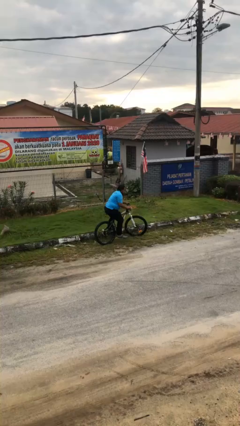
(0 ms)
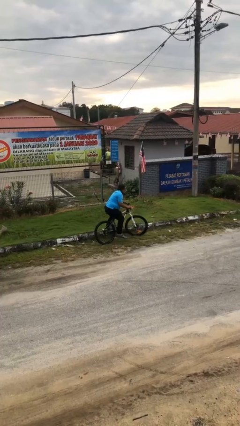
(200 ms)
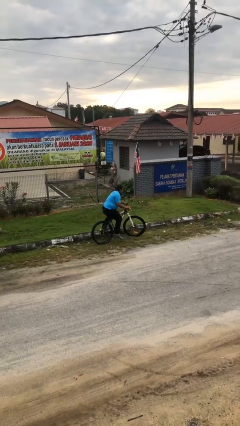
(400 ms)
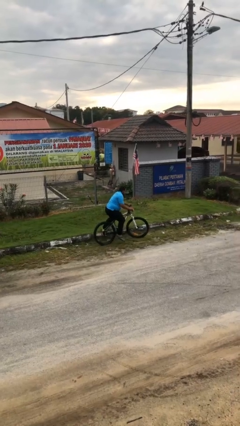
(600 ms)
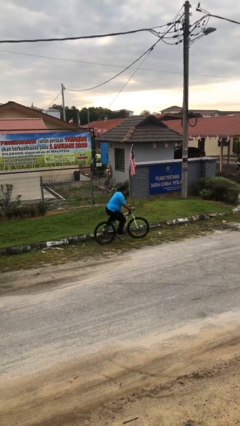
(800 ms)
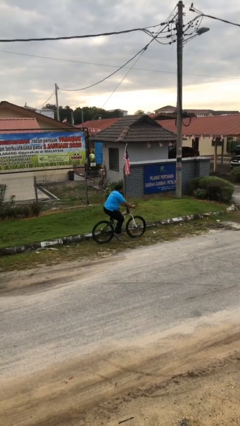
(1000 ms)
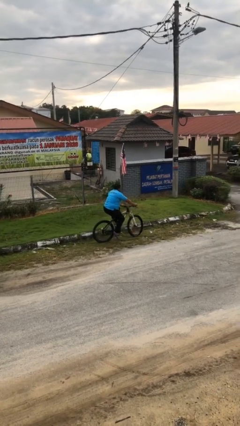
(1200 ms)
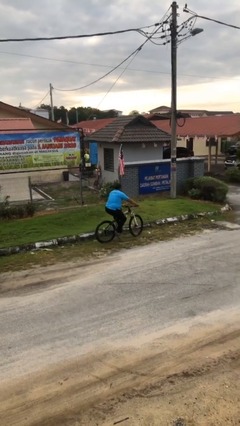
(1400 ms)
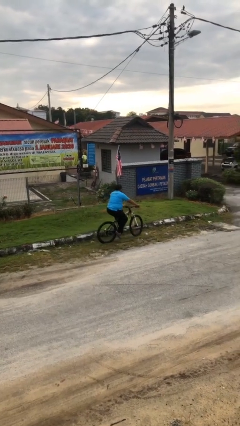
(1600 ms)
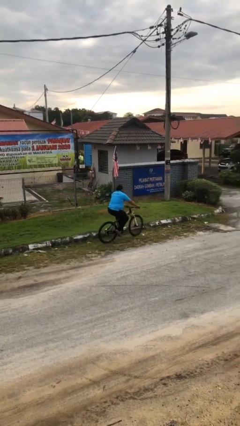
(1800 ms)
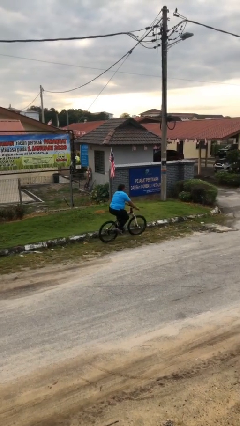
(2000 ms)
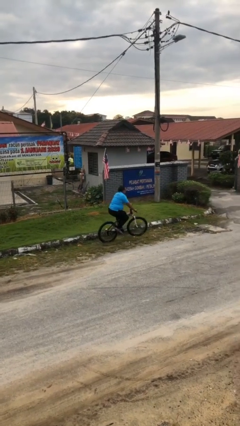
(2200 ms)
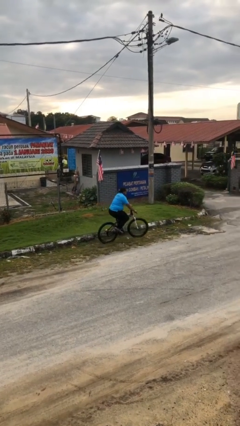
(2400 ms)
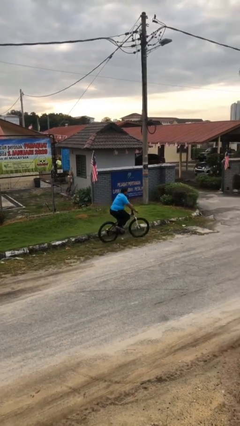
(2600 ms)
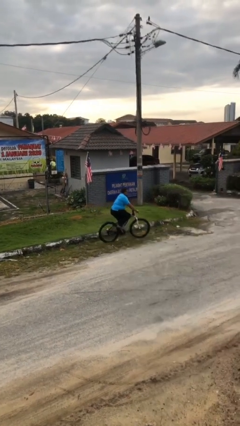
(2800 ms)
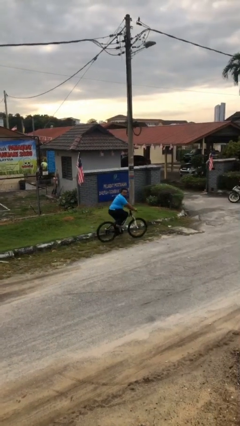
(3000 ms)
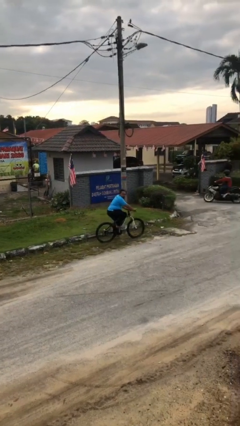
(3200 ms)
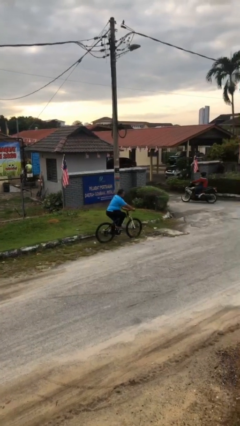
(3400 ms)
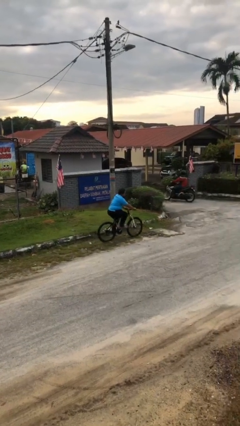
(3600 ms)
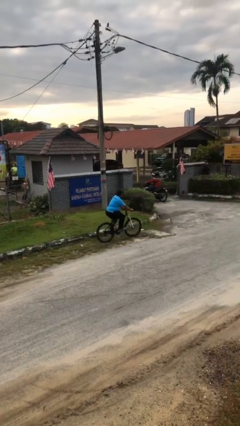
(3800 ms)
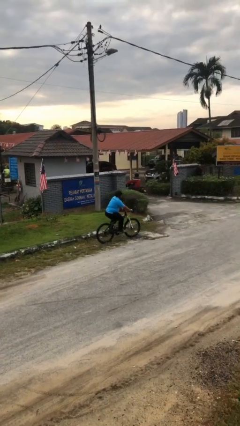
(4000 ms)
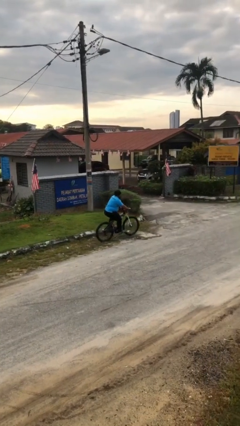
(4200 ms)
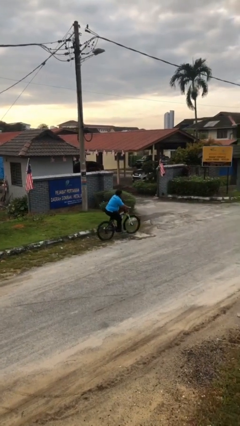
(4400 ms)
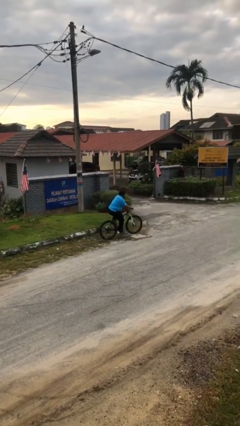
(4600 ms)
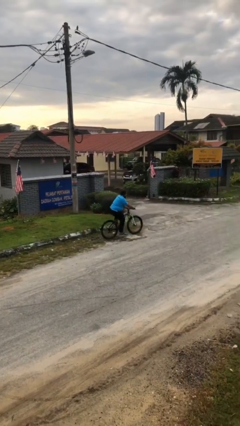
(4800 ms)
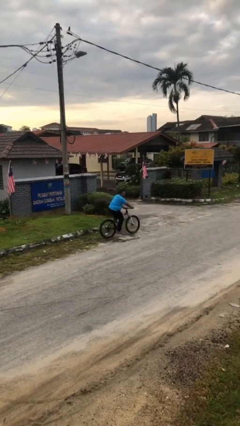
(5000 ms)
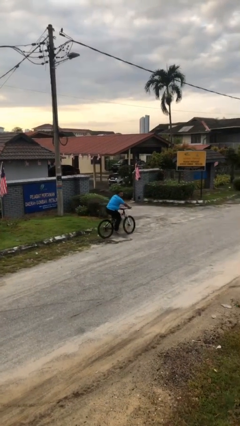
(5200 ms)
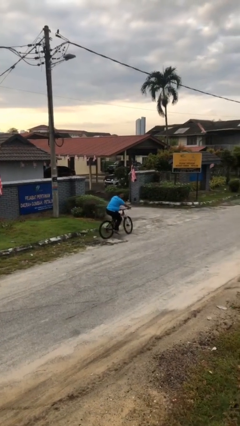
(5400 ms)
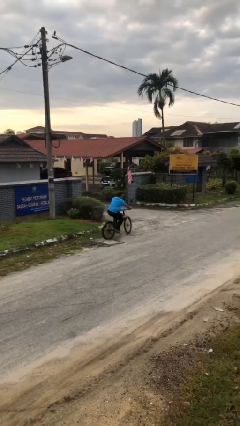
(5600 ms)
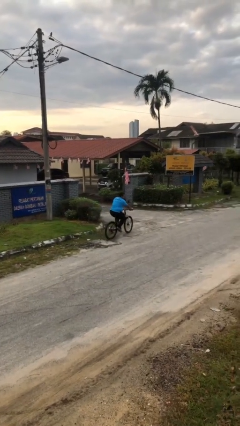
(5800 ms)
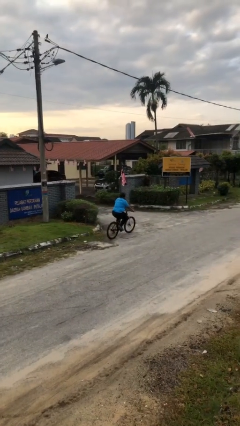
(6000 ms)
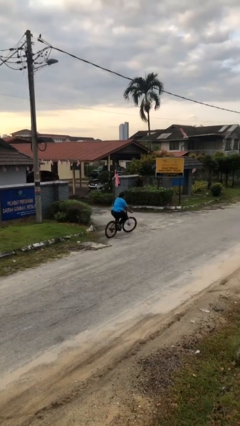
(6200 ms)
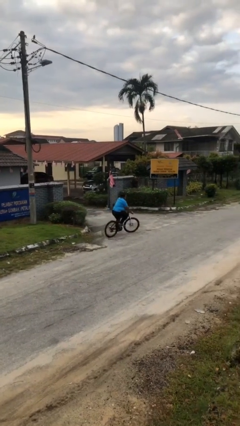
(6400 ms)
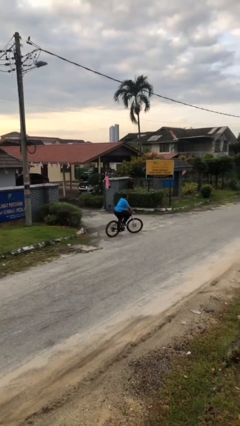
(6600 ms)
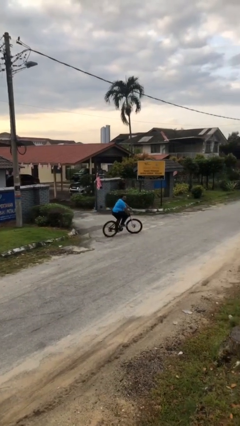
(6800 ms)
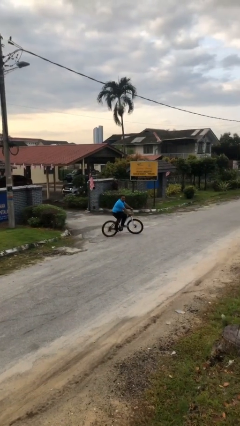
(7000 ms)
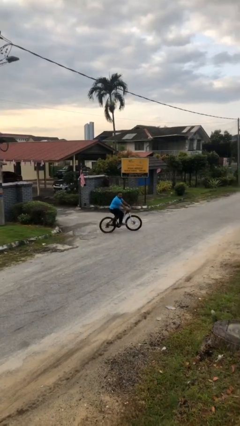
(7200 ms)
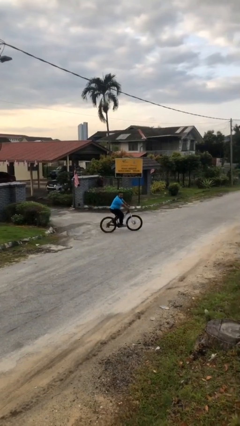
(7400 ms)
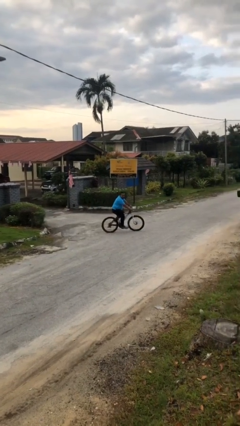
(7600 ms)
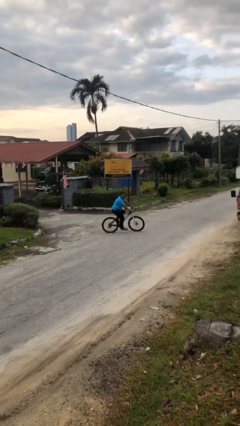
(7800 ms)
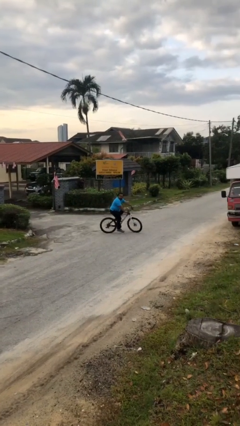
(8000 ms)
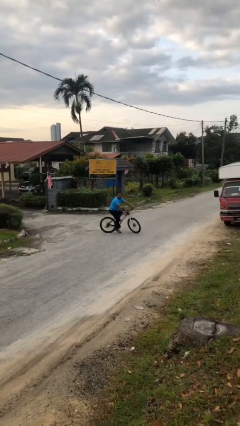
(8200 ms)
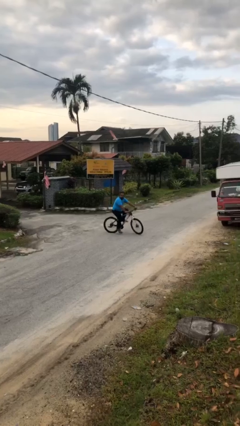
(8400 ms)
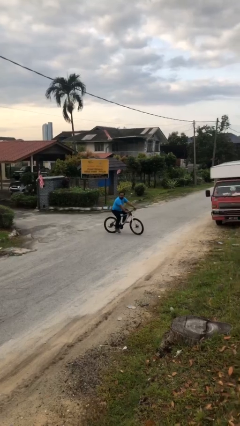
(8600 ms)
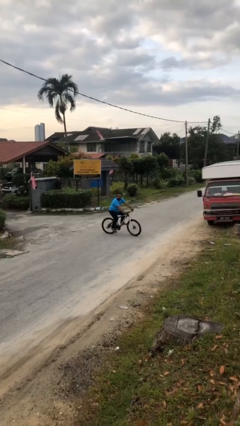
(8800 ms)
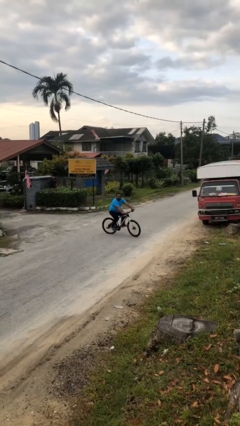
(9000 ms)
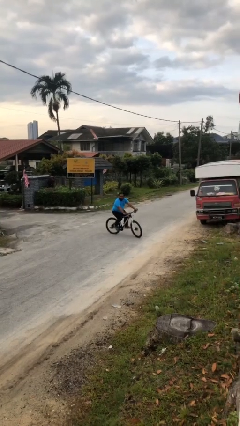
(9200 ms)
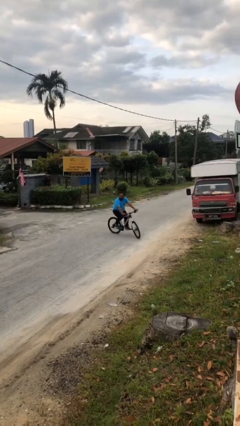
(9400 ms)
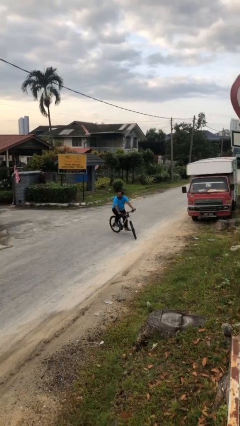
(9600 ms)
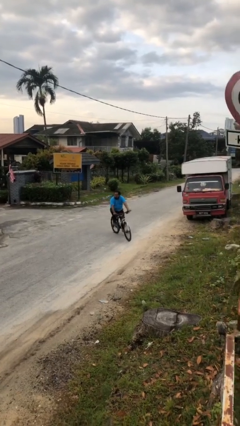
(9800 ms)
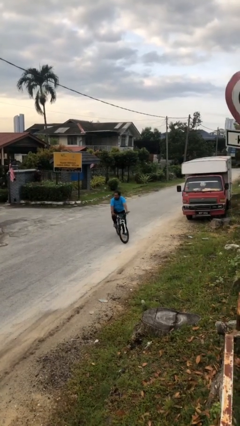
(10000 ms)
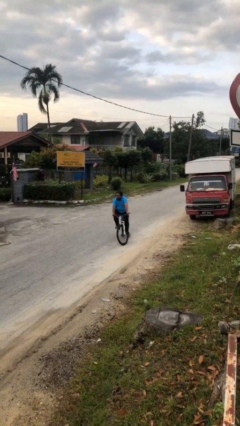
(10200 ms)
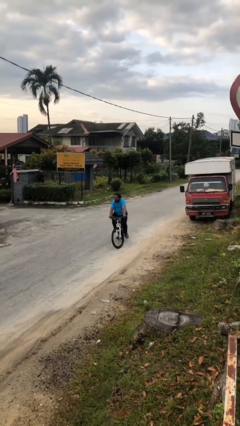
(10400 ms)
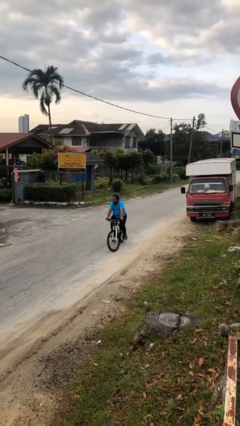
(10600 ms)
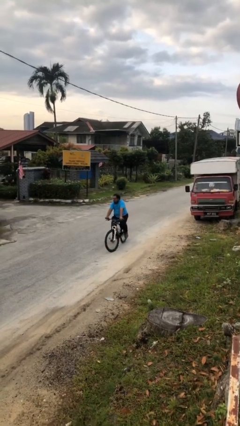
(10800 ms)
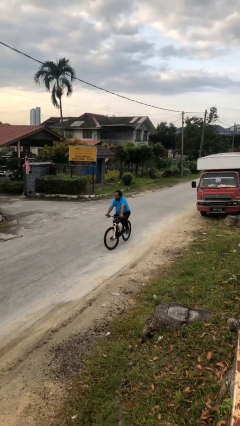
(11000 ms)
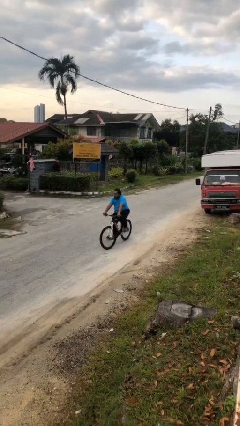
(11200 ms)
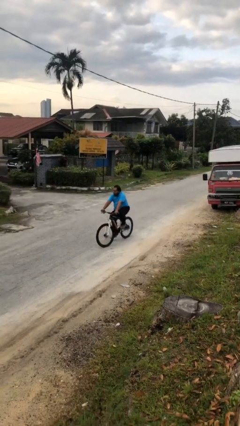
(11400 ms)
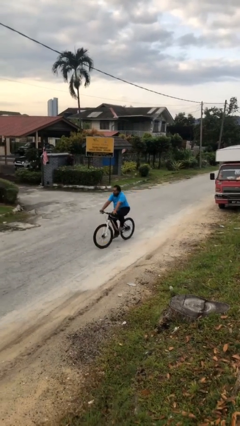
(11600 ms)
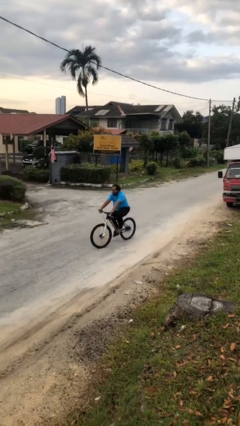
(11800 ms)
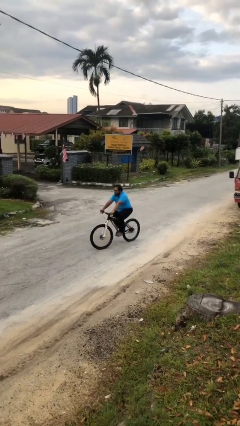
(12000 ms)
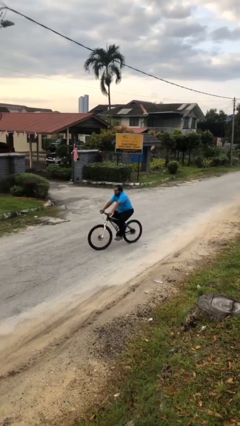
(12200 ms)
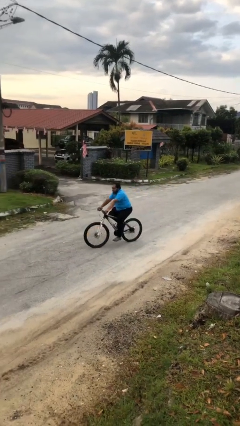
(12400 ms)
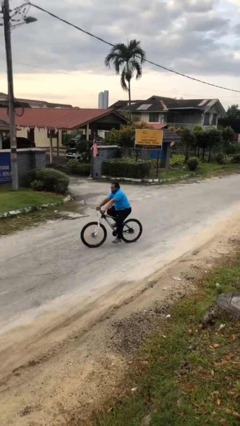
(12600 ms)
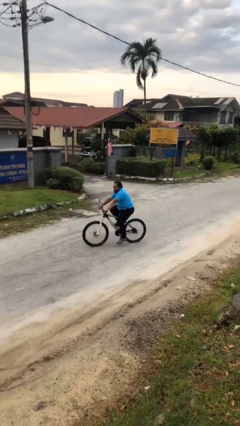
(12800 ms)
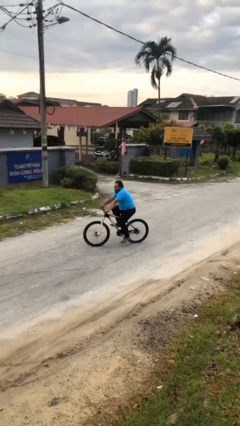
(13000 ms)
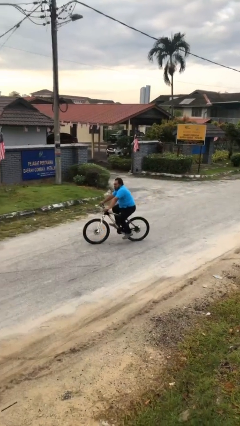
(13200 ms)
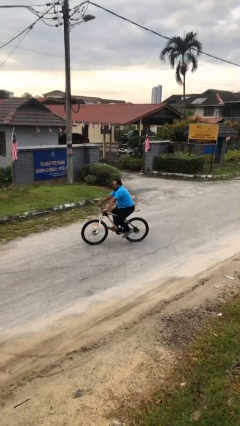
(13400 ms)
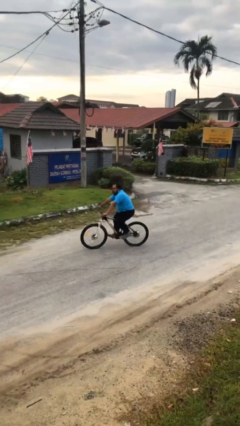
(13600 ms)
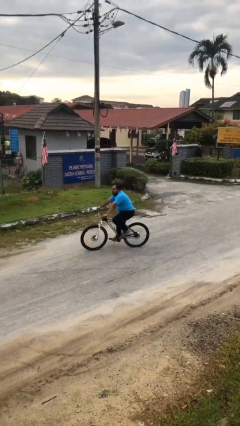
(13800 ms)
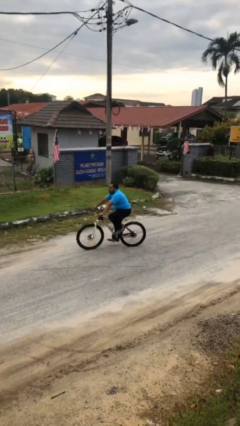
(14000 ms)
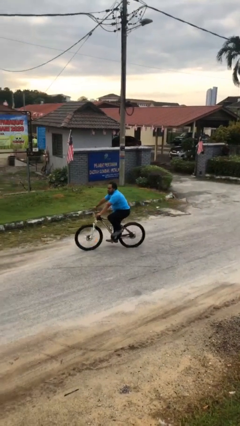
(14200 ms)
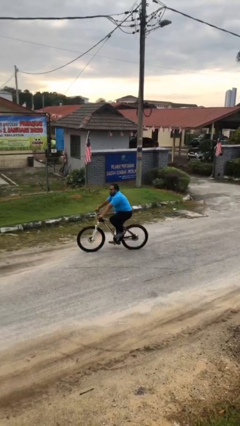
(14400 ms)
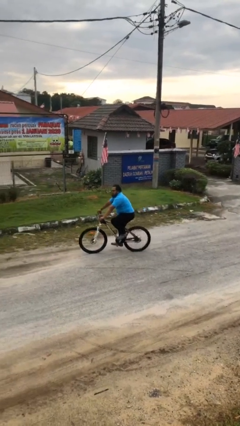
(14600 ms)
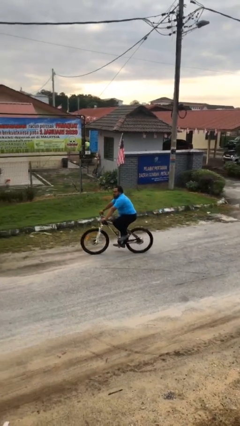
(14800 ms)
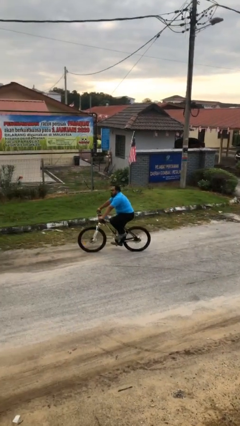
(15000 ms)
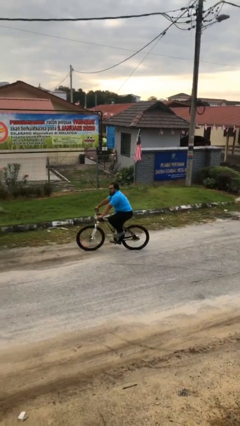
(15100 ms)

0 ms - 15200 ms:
person rides bicycle

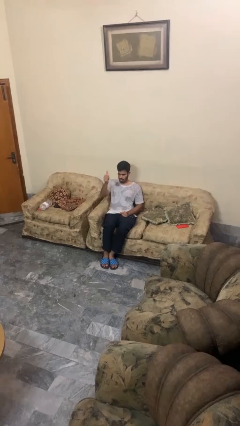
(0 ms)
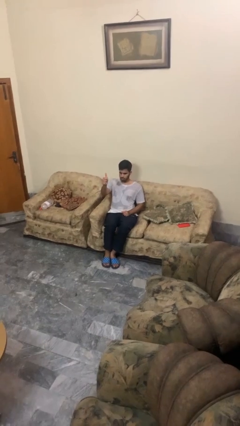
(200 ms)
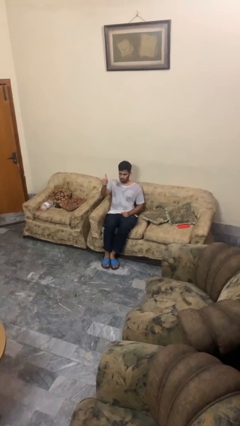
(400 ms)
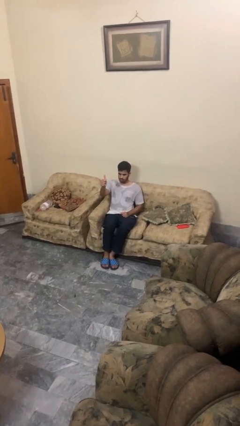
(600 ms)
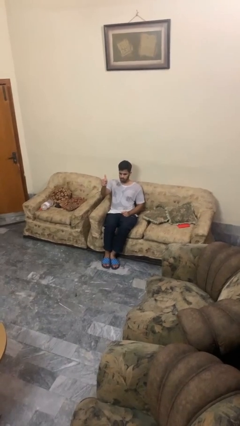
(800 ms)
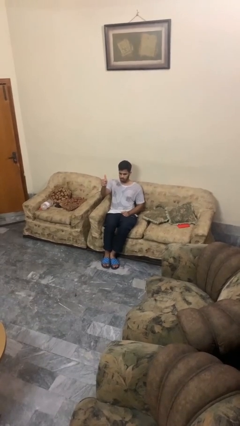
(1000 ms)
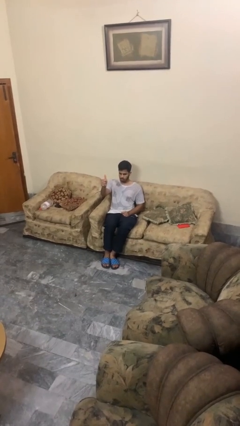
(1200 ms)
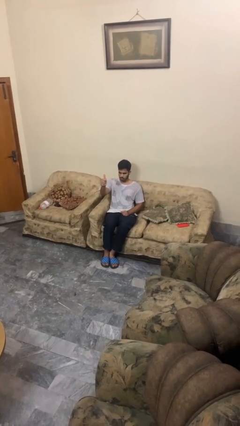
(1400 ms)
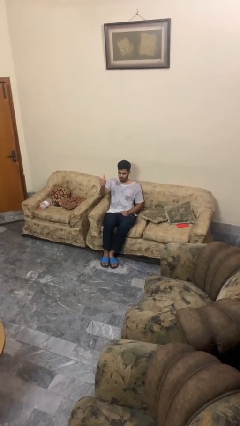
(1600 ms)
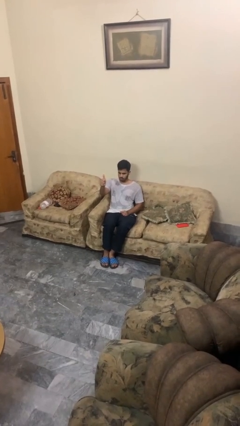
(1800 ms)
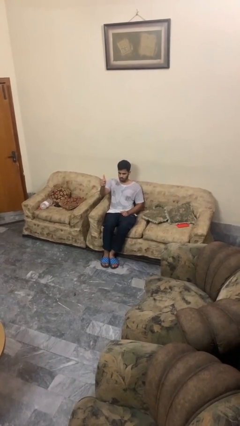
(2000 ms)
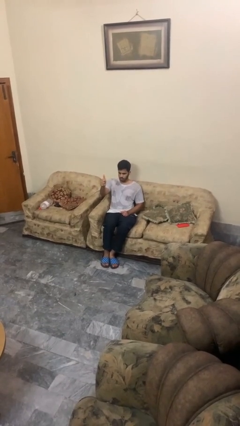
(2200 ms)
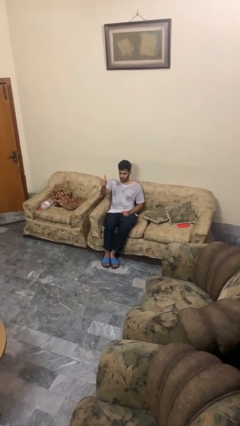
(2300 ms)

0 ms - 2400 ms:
person gestures thumbs up

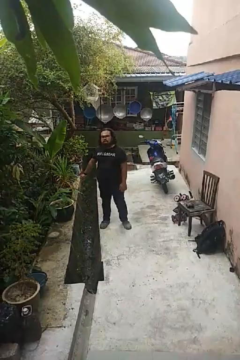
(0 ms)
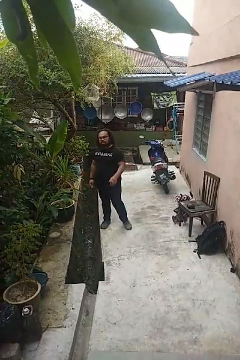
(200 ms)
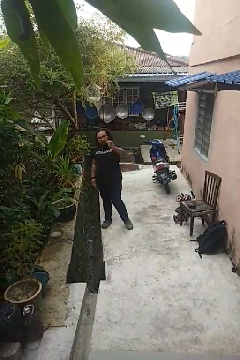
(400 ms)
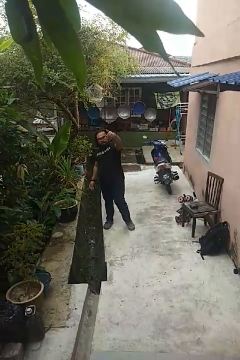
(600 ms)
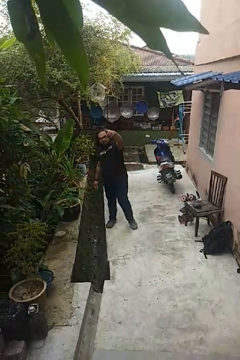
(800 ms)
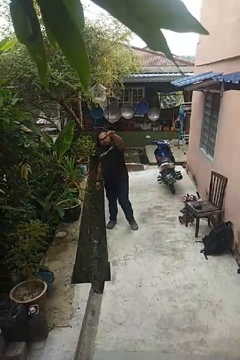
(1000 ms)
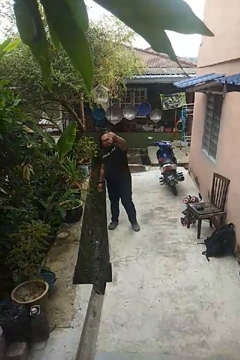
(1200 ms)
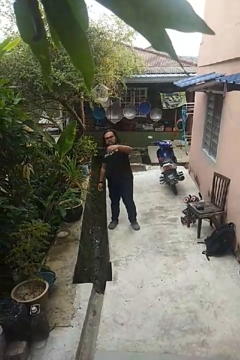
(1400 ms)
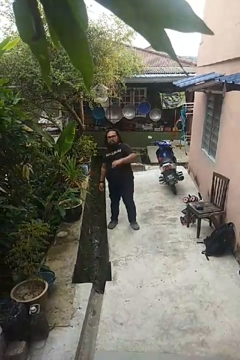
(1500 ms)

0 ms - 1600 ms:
person gestures come here
